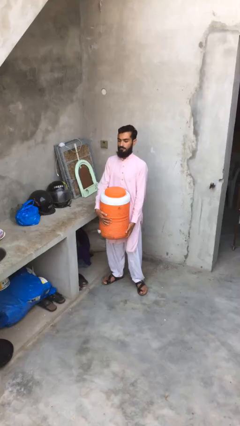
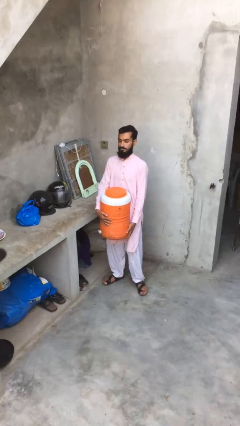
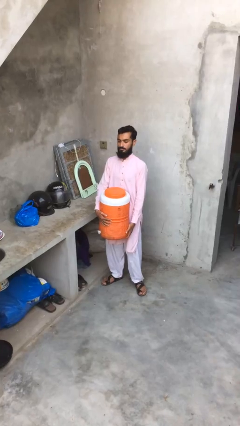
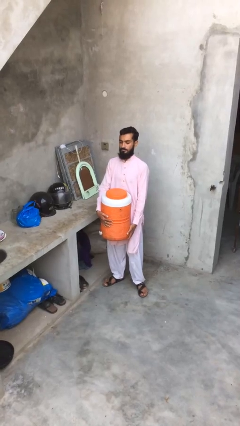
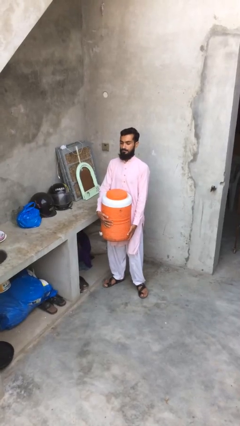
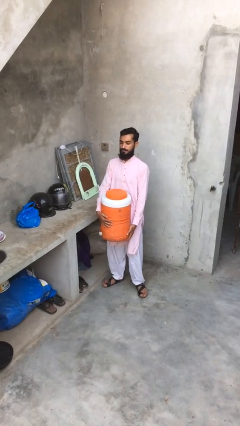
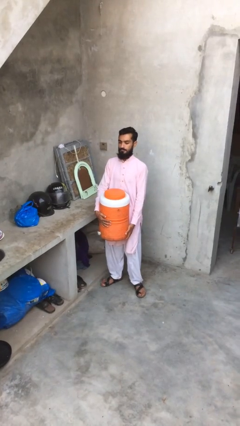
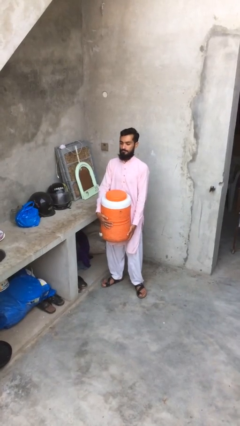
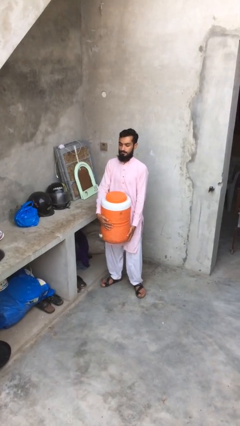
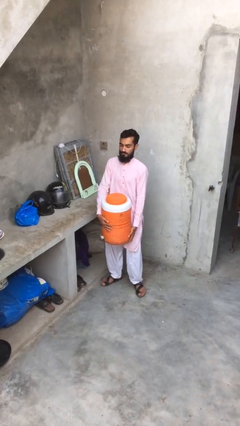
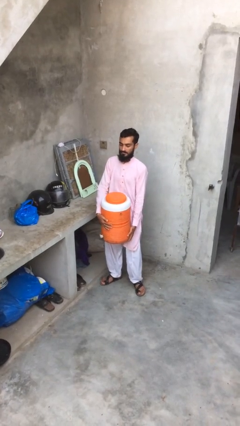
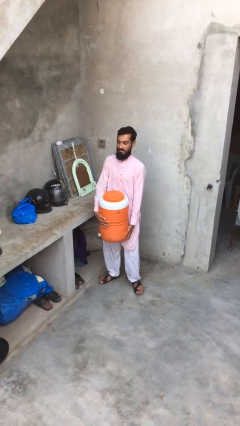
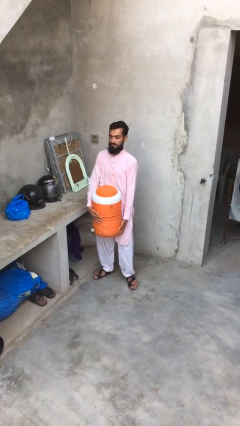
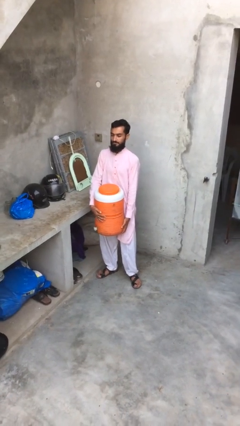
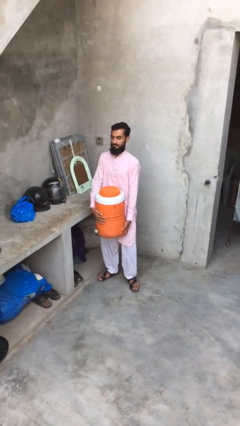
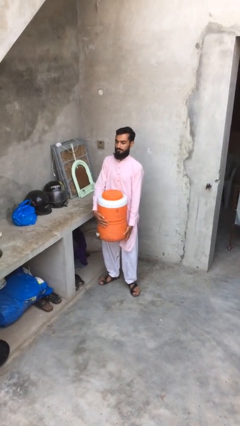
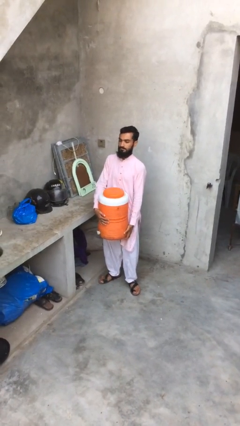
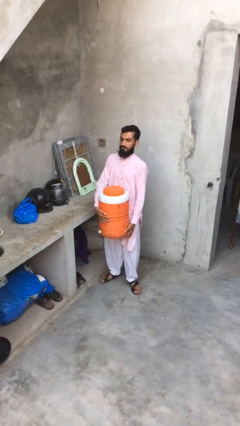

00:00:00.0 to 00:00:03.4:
person carries heavy object

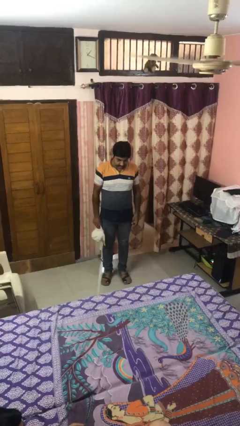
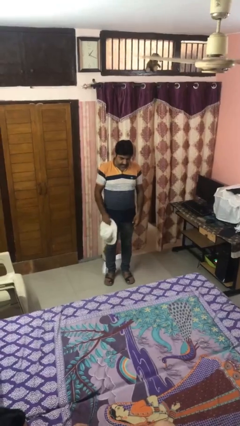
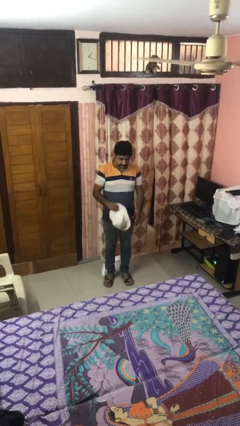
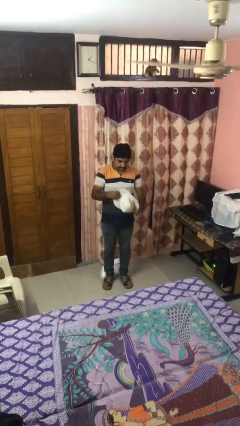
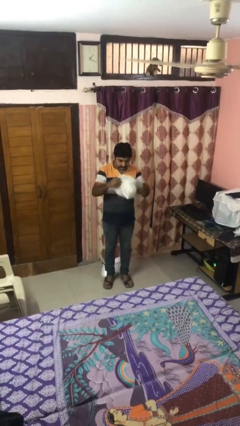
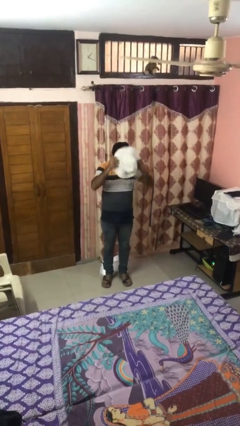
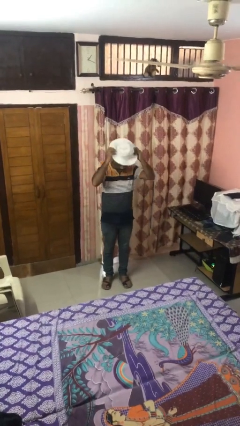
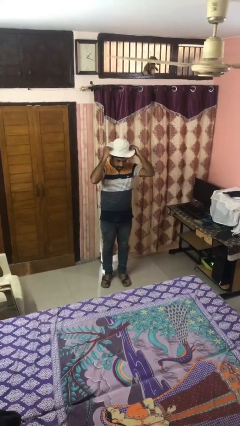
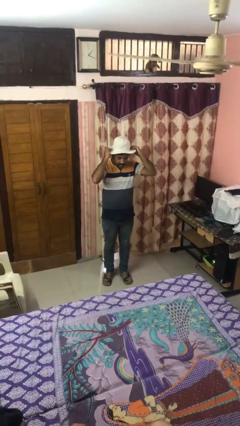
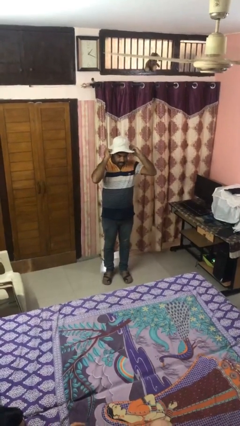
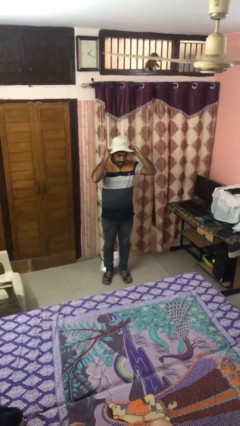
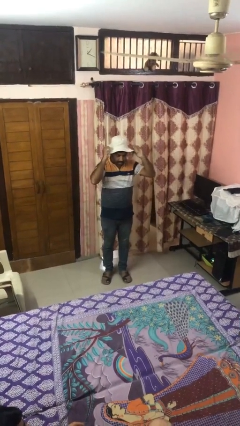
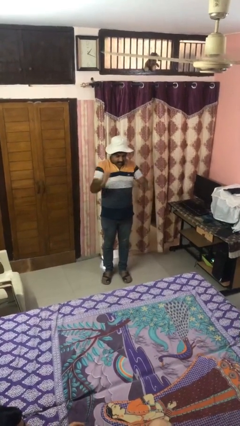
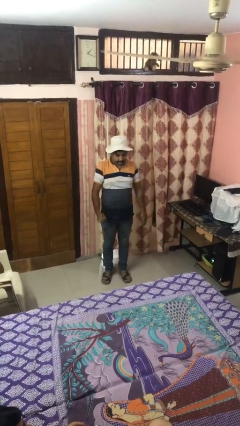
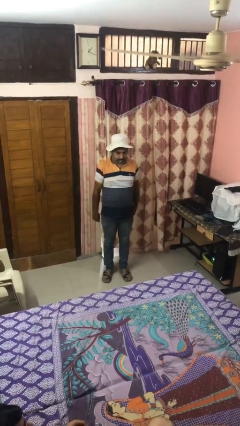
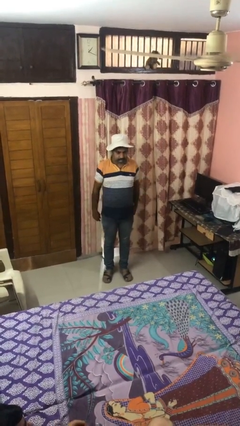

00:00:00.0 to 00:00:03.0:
person puts on hat

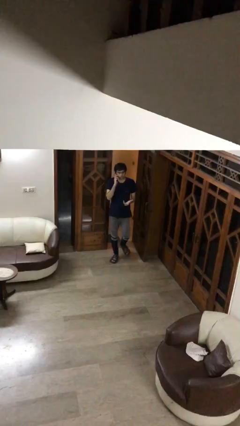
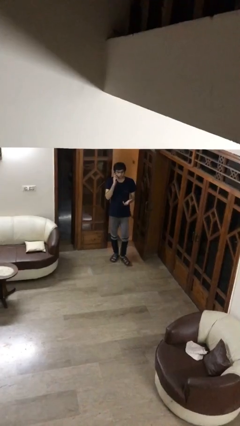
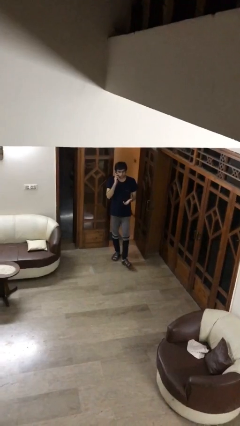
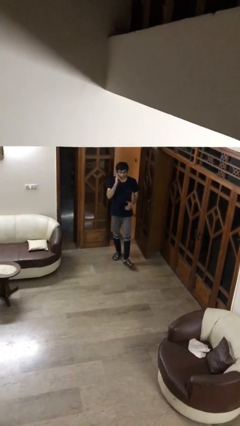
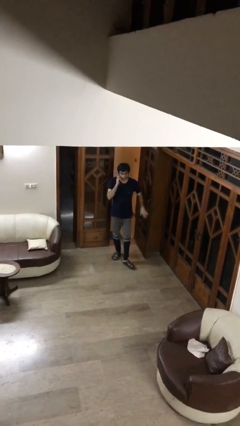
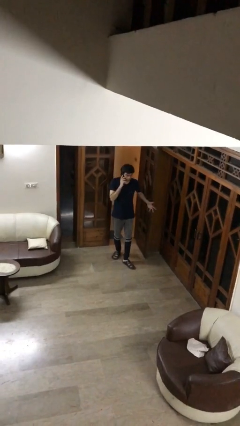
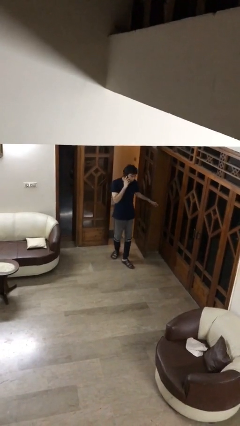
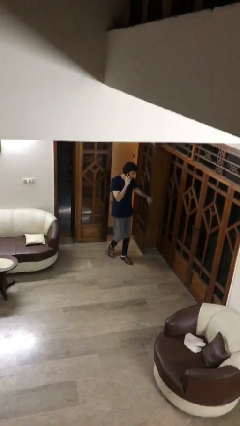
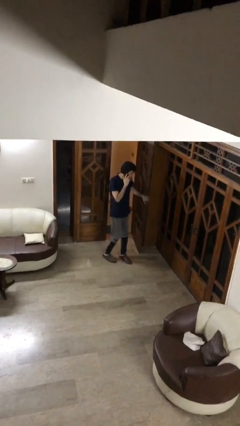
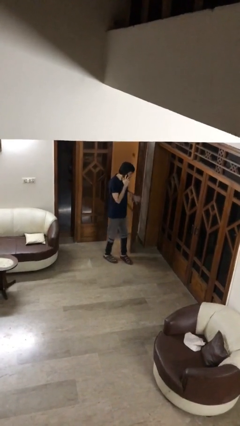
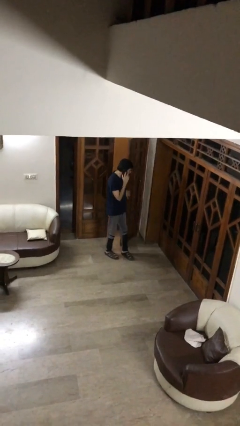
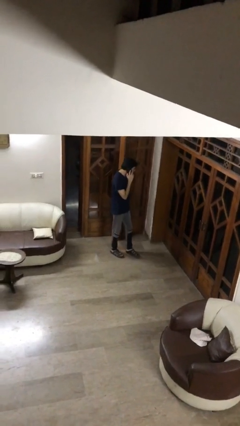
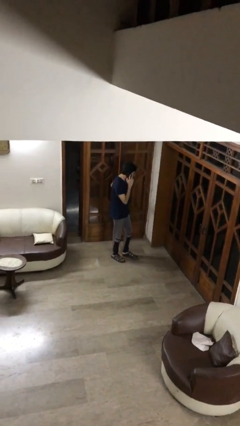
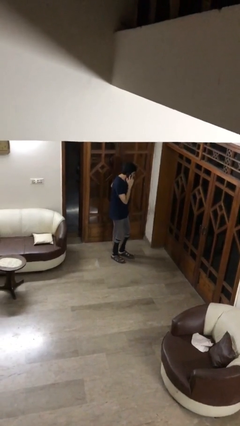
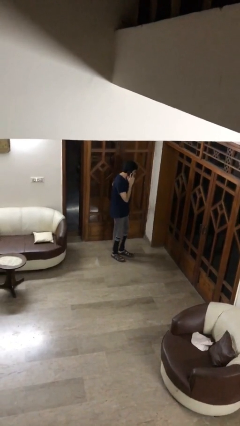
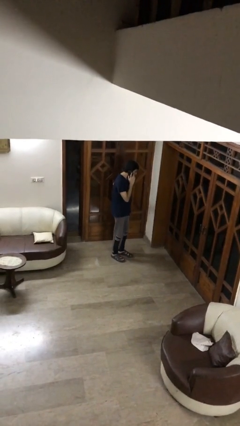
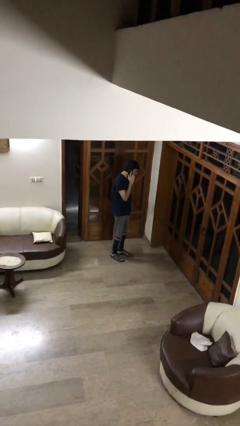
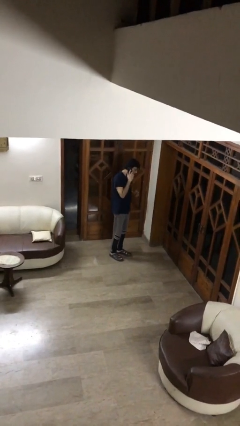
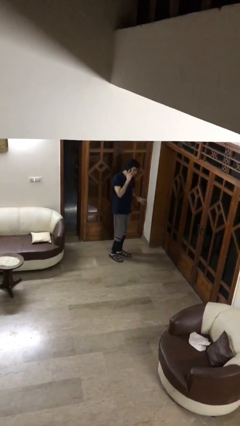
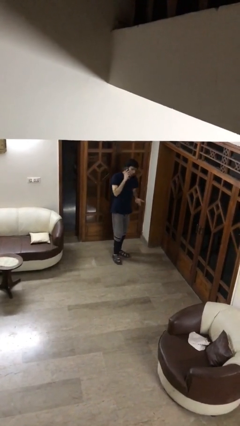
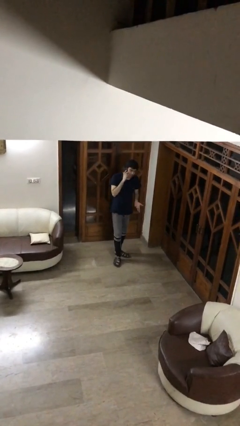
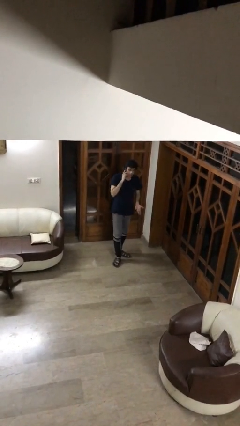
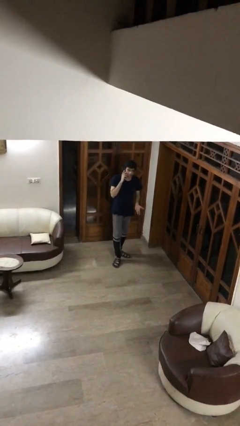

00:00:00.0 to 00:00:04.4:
person closes facility door

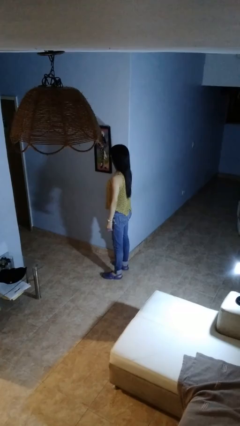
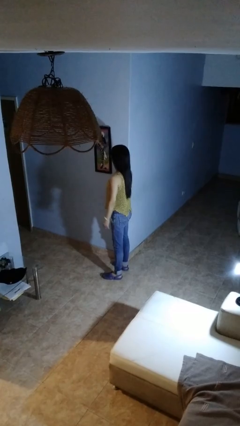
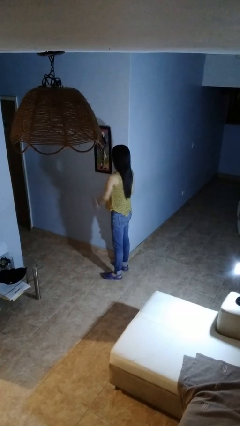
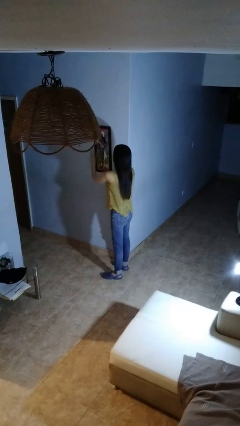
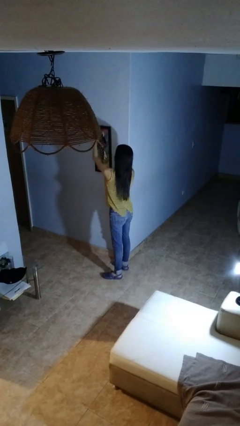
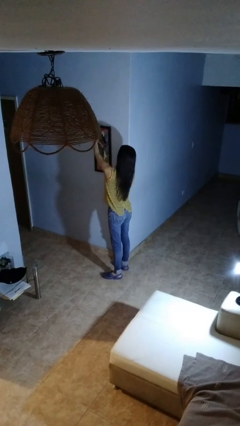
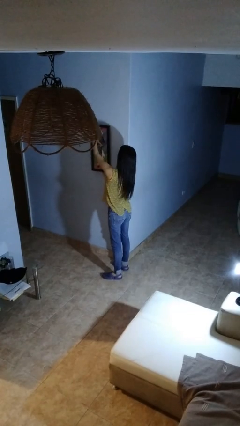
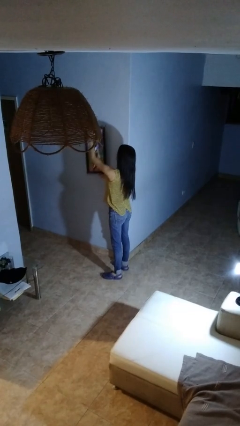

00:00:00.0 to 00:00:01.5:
person takes down picture frame

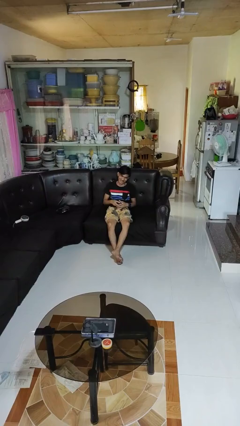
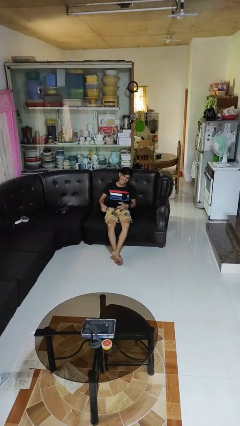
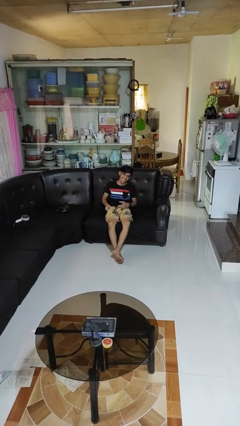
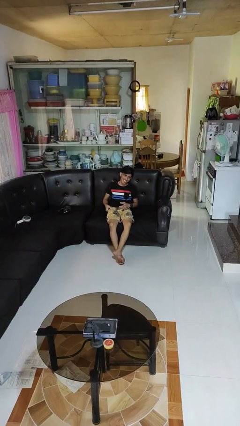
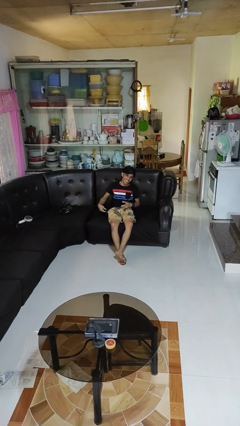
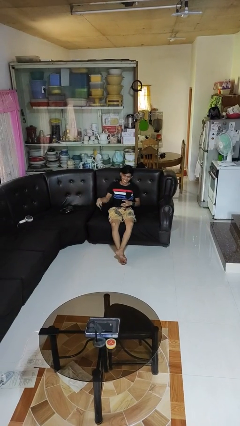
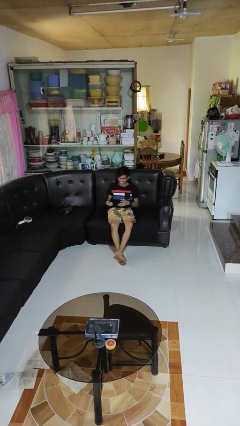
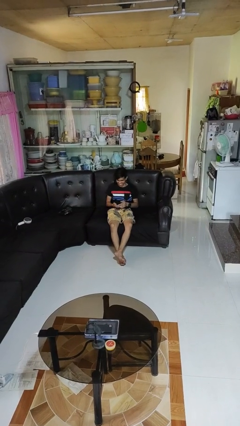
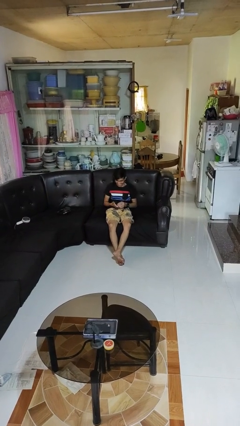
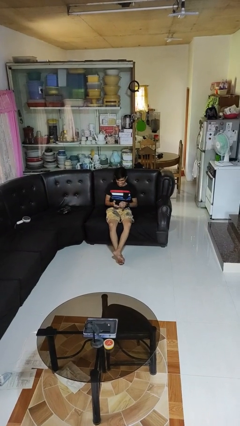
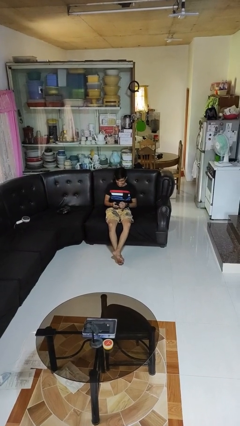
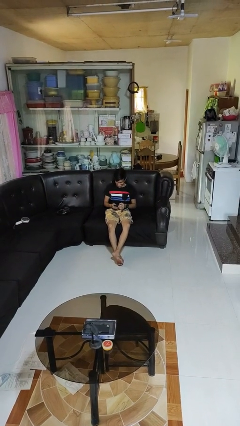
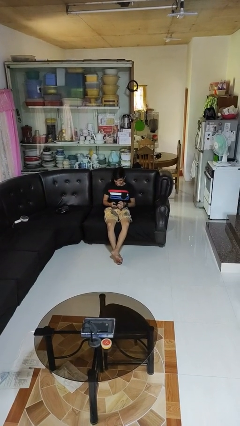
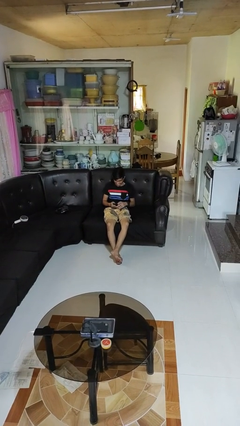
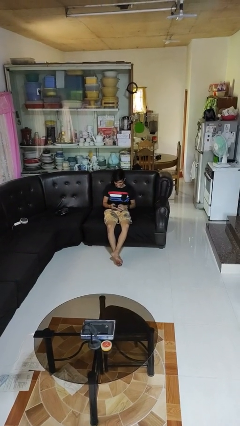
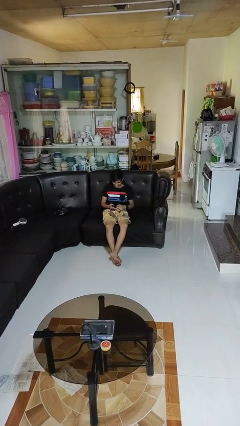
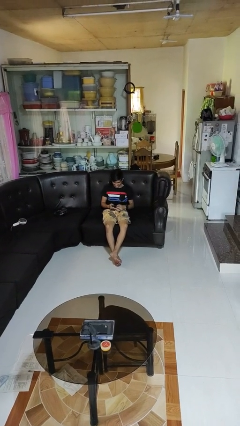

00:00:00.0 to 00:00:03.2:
person takes phone from pocket

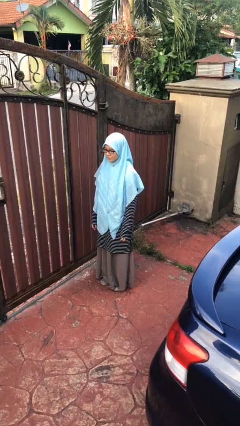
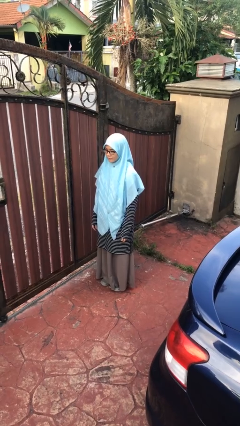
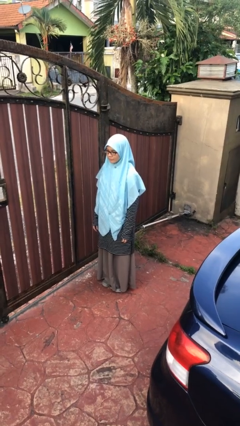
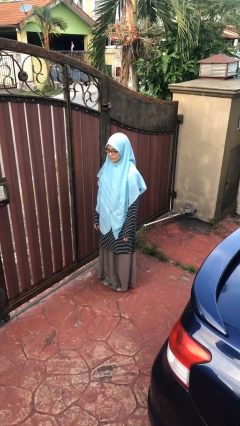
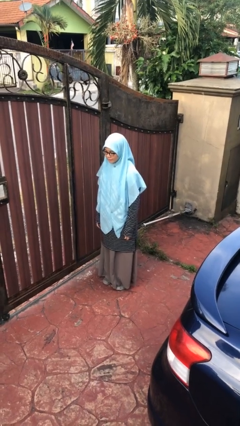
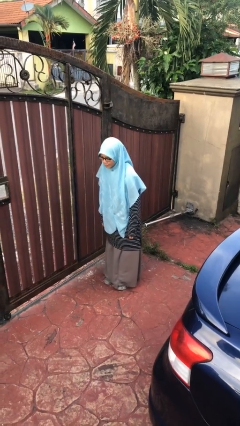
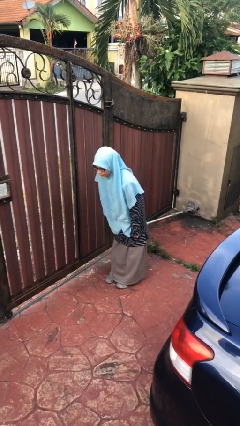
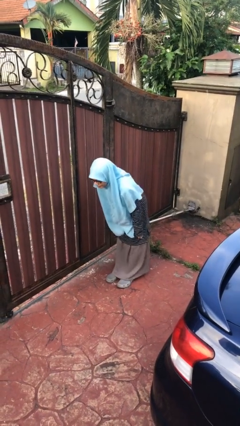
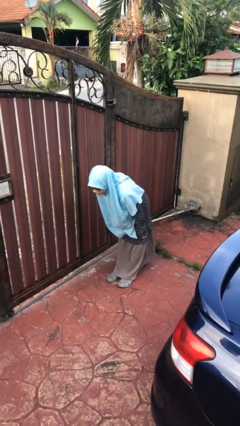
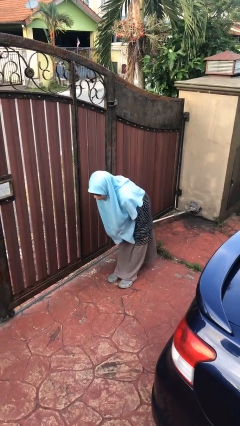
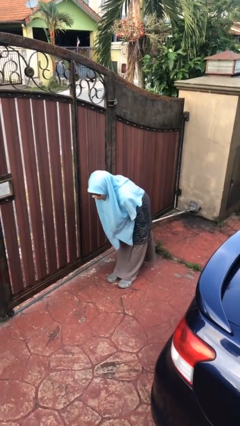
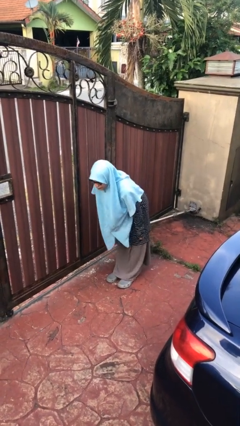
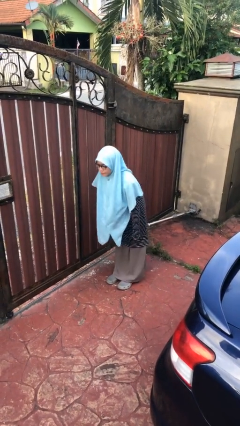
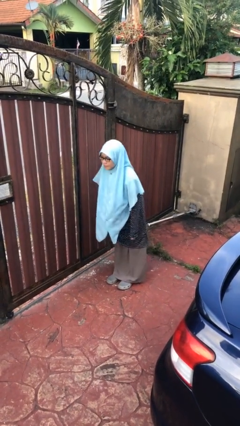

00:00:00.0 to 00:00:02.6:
person bows
